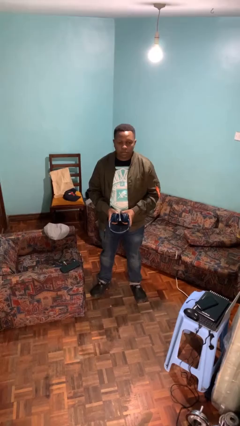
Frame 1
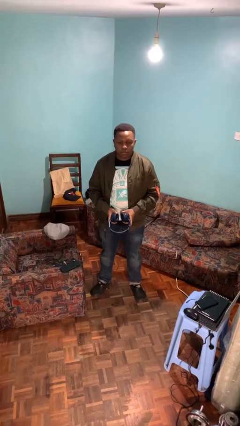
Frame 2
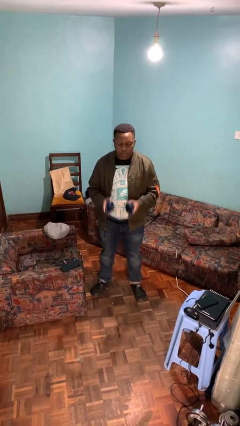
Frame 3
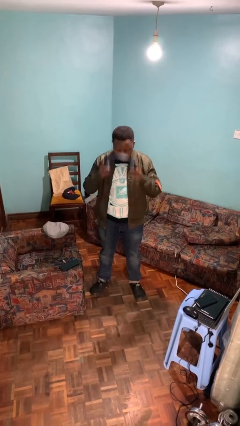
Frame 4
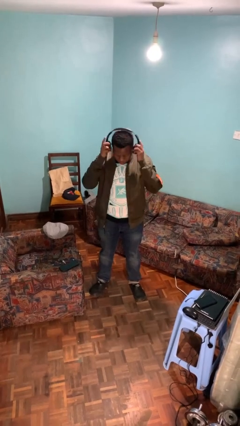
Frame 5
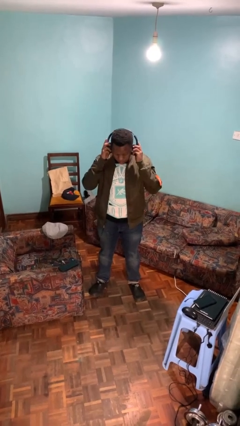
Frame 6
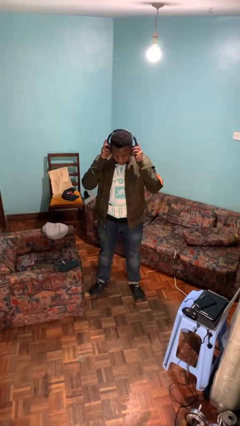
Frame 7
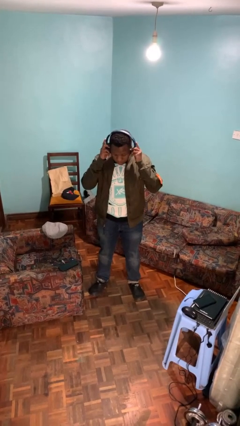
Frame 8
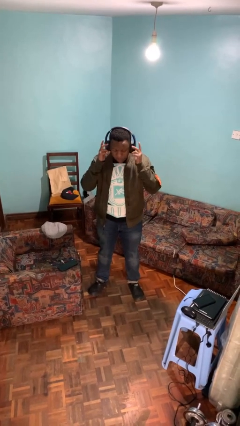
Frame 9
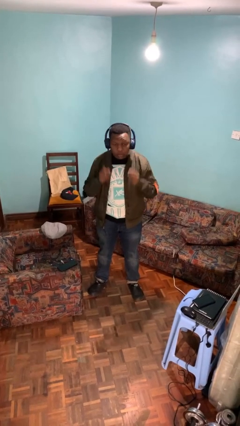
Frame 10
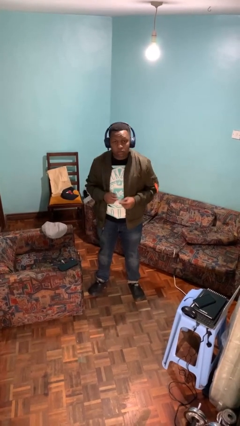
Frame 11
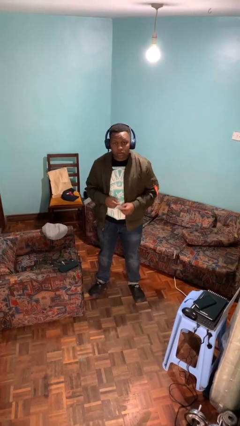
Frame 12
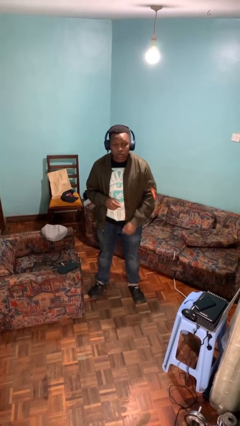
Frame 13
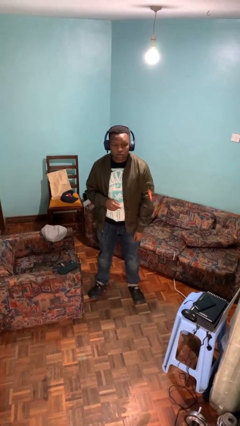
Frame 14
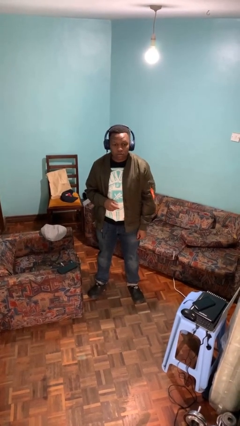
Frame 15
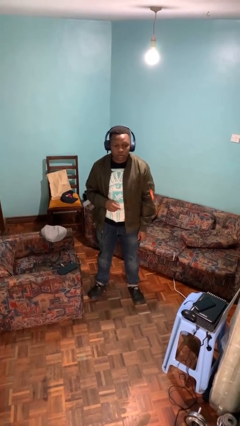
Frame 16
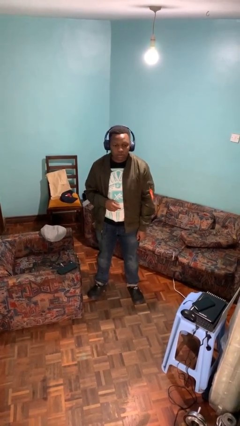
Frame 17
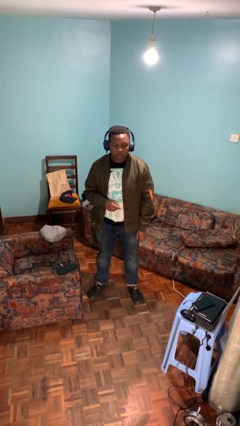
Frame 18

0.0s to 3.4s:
person puts on headphones

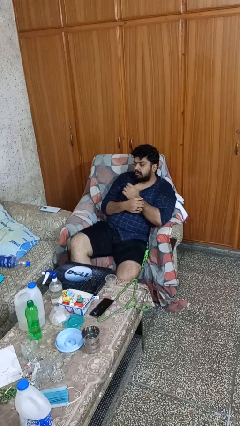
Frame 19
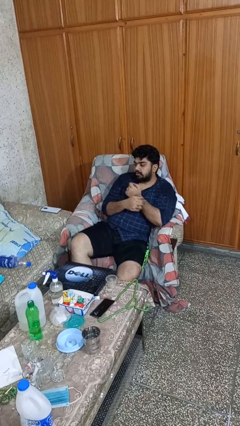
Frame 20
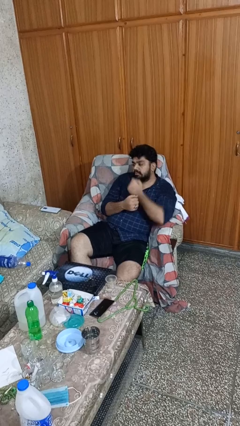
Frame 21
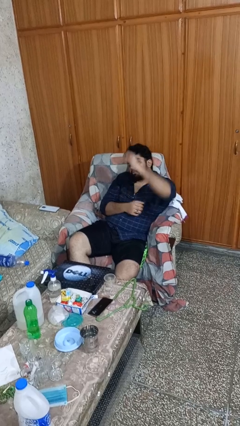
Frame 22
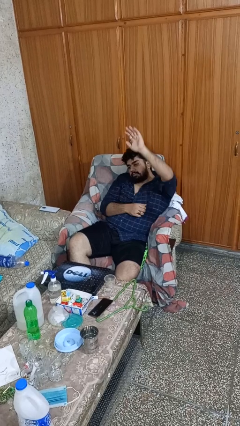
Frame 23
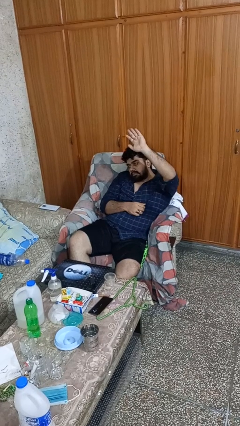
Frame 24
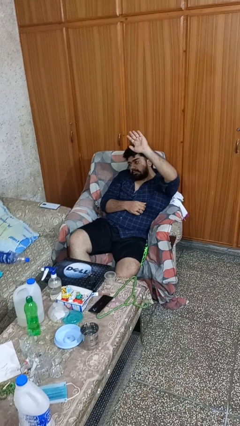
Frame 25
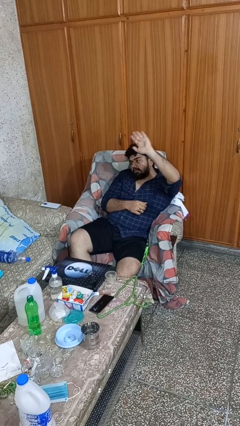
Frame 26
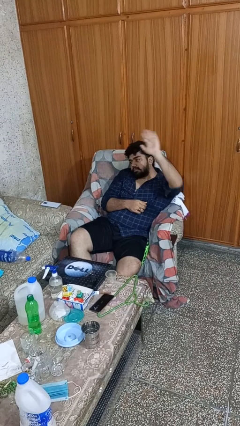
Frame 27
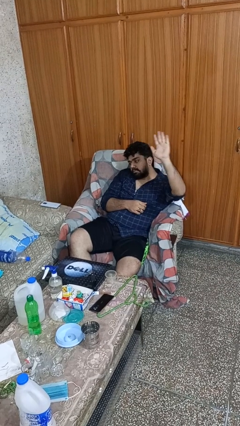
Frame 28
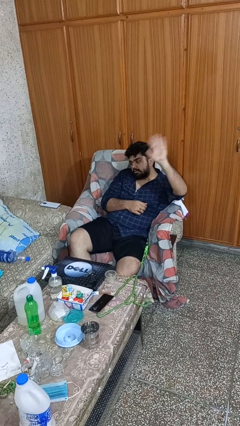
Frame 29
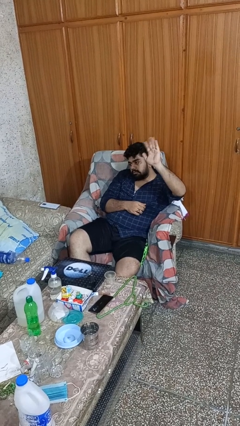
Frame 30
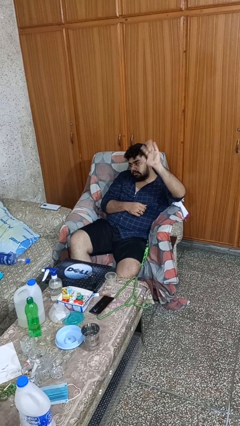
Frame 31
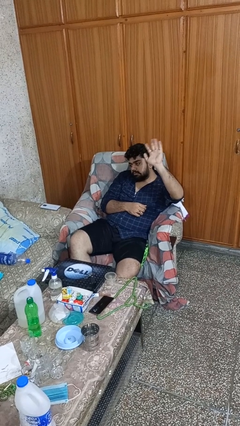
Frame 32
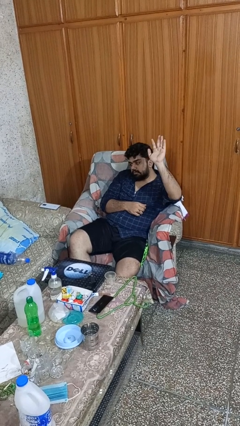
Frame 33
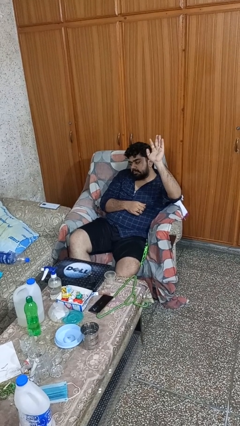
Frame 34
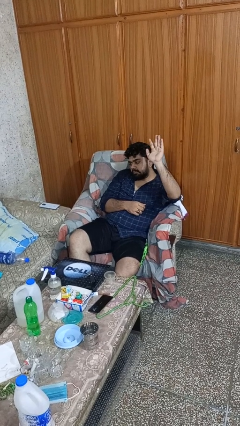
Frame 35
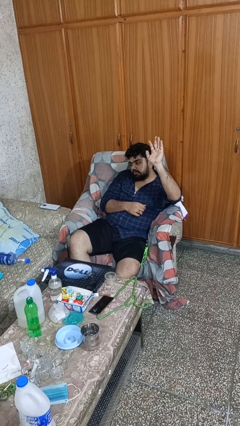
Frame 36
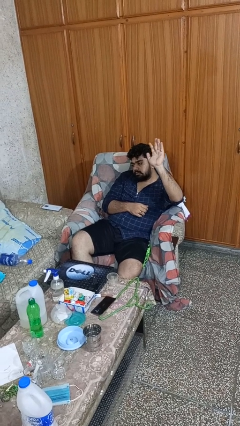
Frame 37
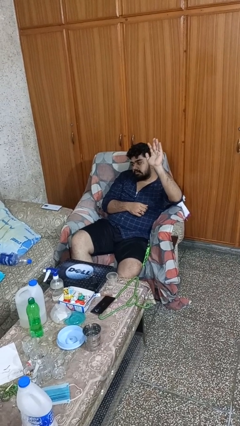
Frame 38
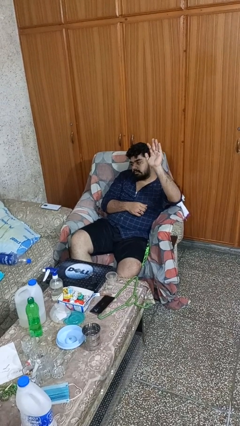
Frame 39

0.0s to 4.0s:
person gestures raise hand

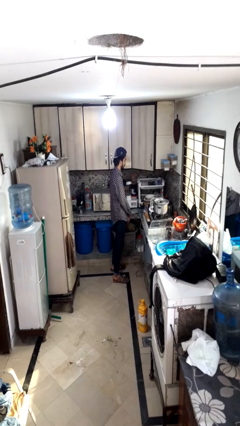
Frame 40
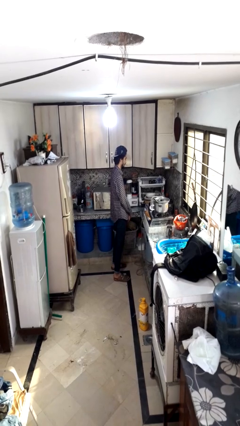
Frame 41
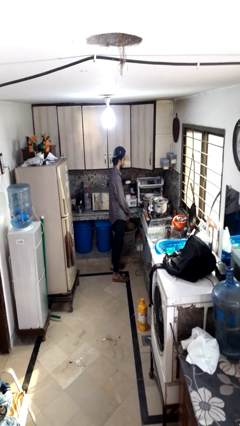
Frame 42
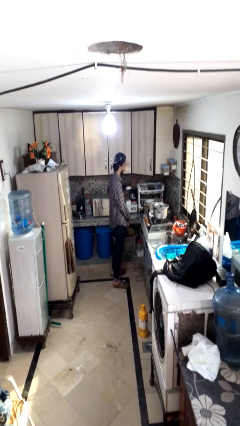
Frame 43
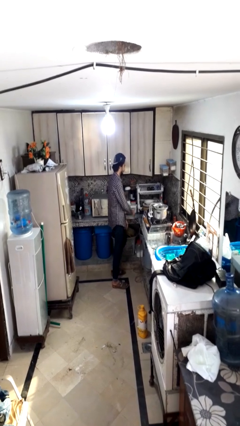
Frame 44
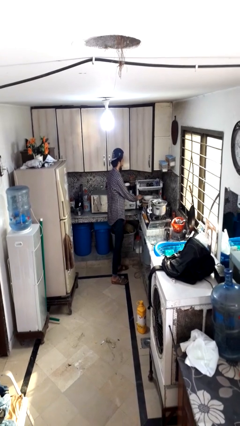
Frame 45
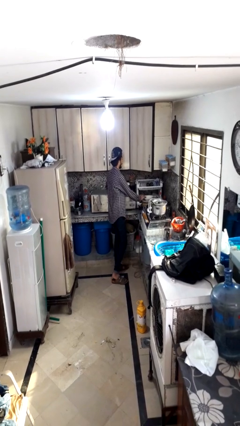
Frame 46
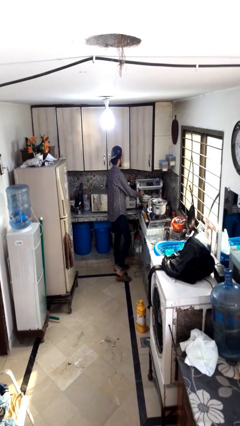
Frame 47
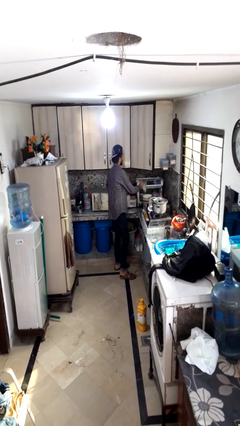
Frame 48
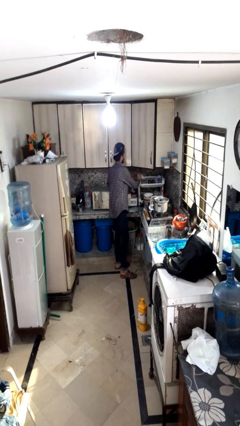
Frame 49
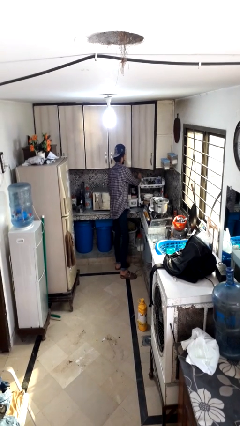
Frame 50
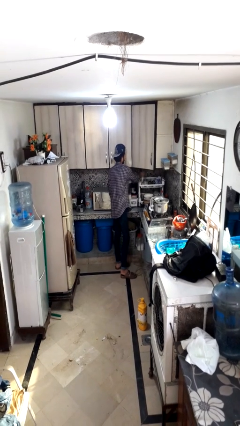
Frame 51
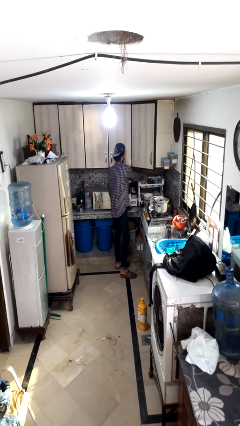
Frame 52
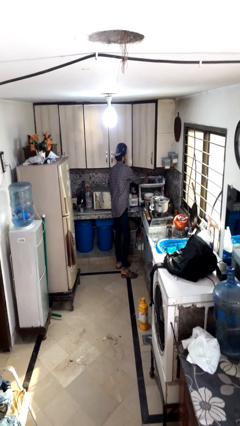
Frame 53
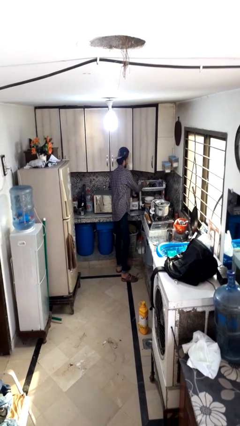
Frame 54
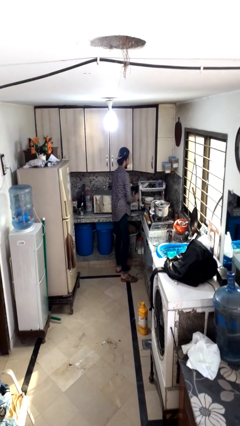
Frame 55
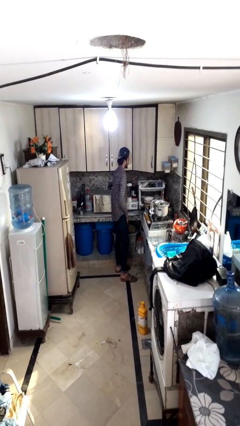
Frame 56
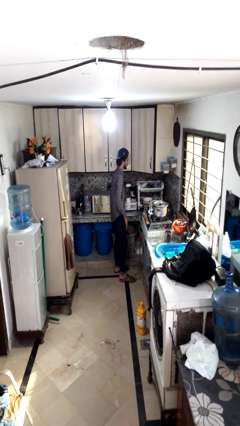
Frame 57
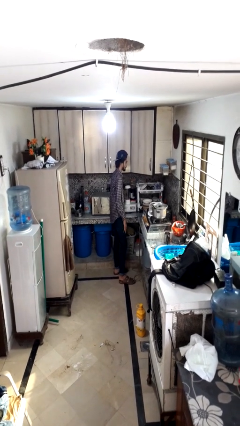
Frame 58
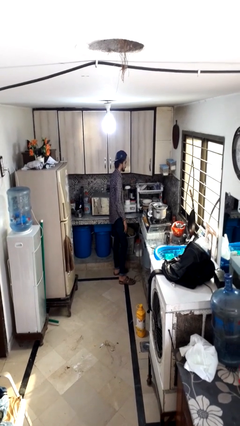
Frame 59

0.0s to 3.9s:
person loads dishwasher

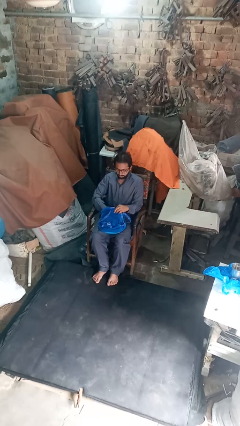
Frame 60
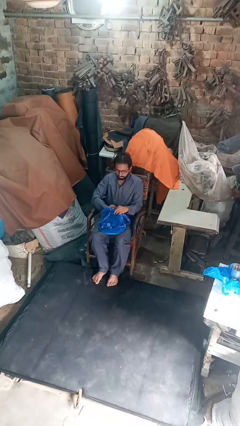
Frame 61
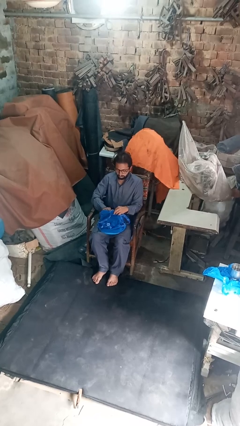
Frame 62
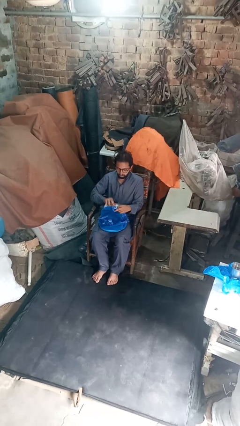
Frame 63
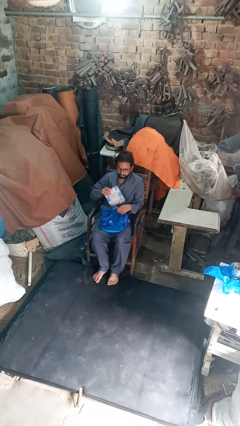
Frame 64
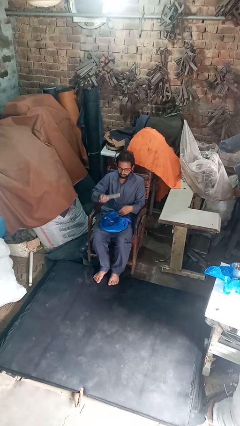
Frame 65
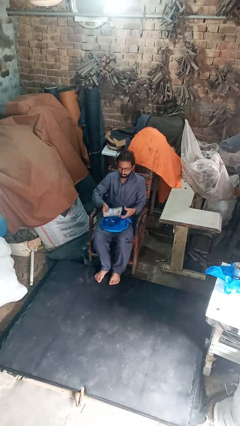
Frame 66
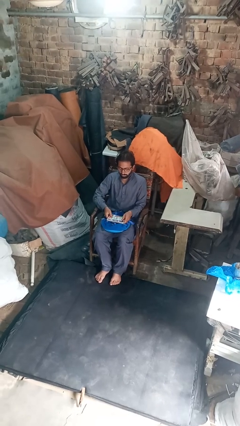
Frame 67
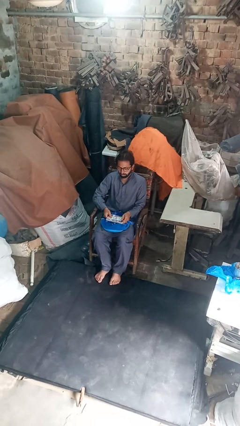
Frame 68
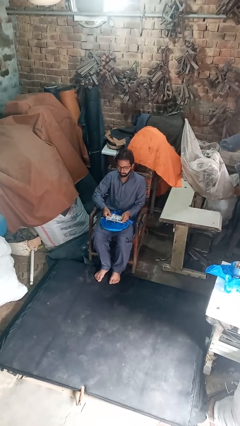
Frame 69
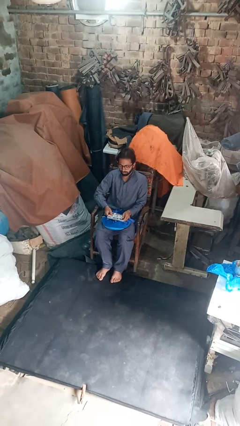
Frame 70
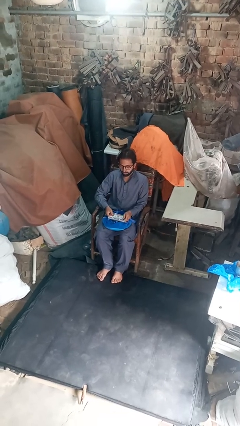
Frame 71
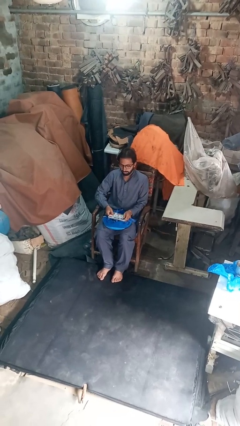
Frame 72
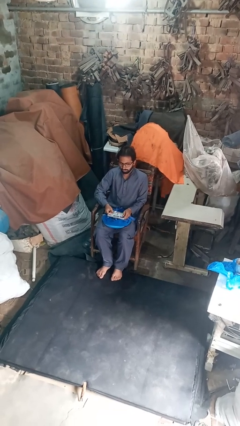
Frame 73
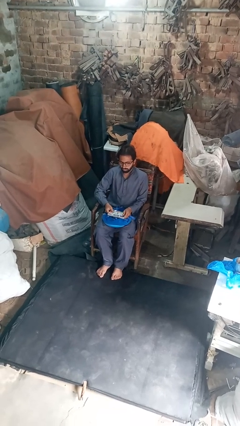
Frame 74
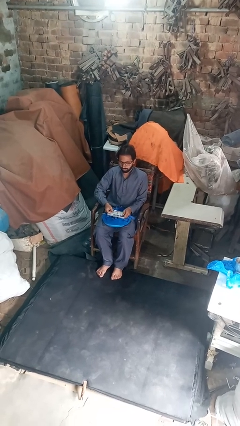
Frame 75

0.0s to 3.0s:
person takes object from backpack

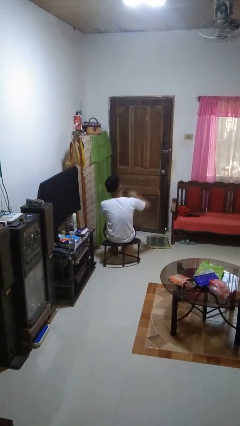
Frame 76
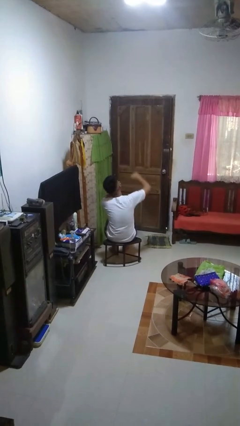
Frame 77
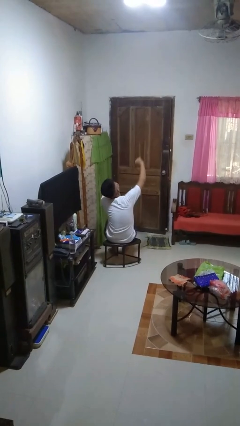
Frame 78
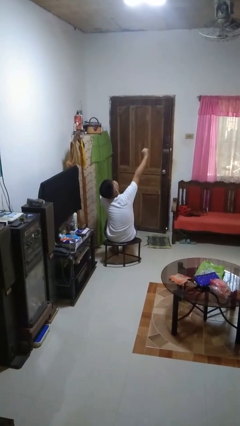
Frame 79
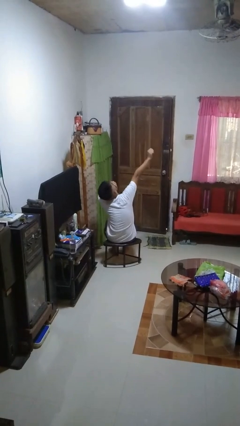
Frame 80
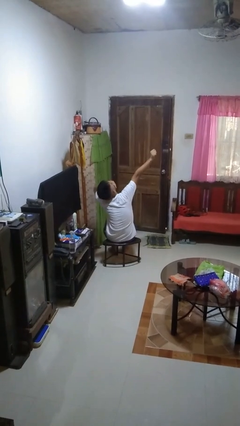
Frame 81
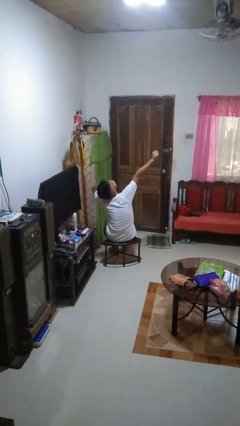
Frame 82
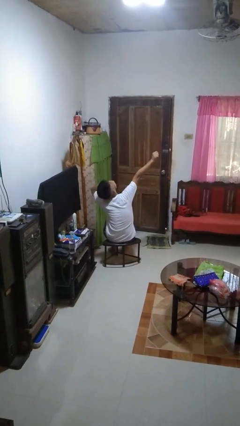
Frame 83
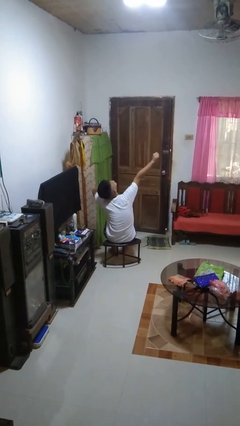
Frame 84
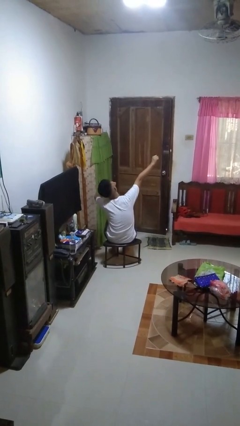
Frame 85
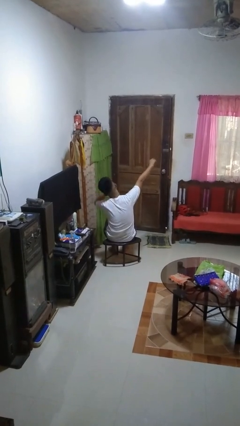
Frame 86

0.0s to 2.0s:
person yawns

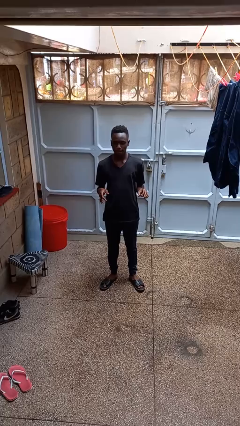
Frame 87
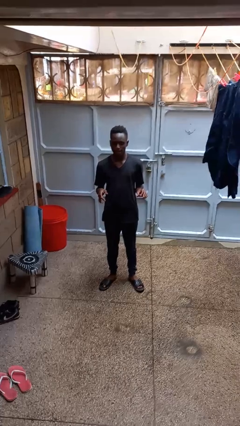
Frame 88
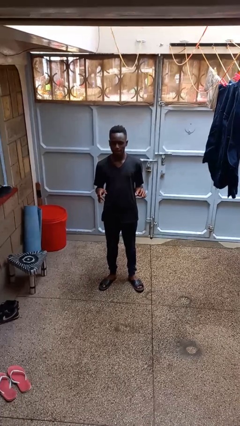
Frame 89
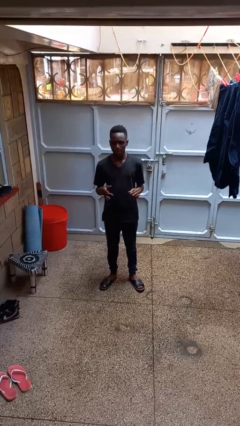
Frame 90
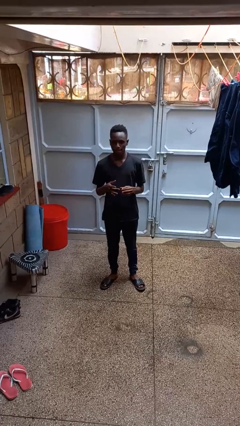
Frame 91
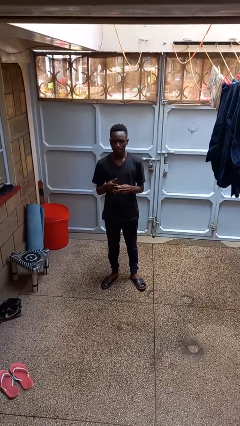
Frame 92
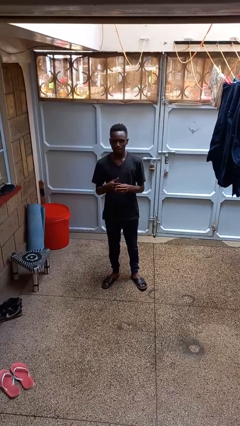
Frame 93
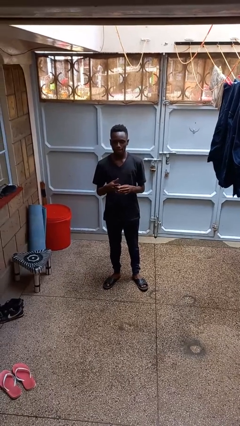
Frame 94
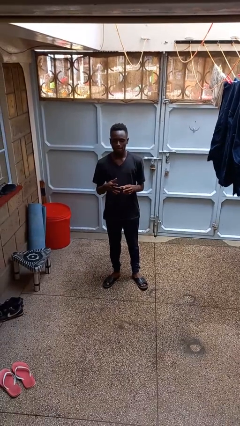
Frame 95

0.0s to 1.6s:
person puts on ring
